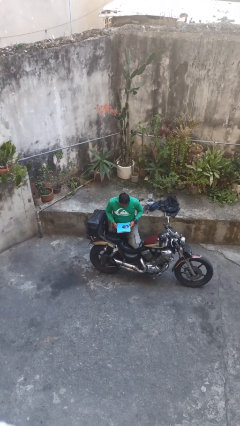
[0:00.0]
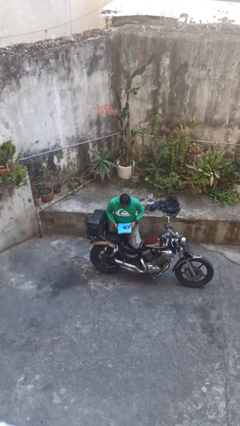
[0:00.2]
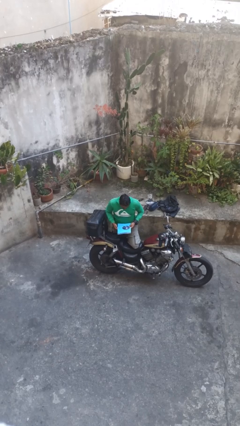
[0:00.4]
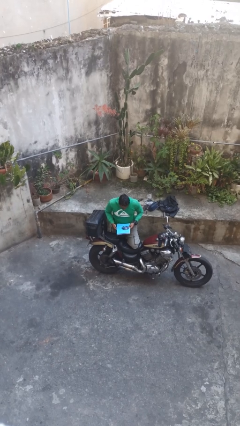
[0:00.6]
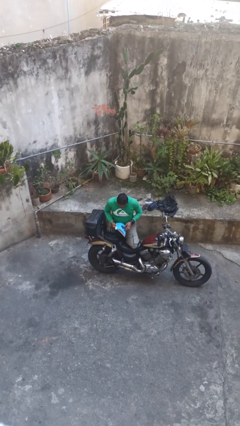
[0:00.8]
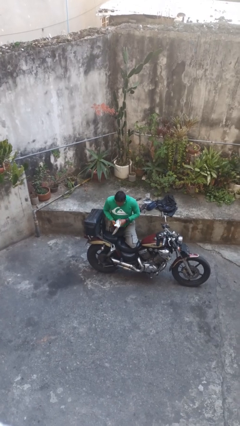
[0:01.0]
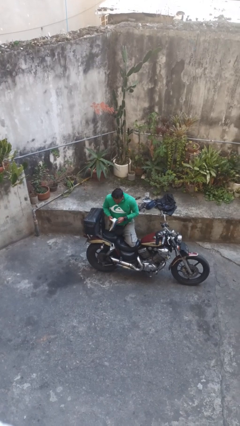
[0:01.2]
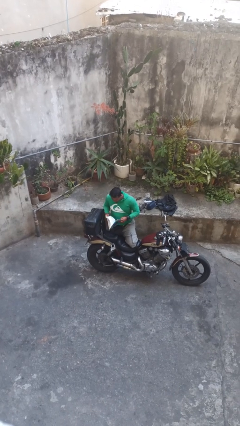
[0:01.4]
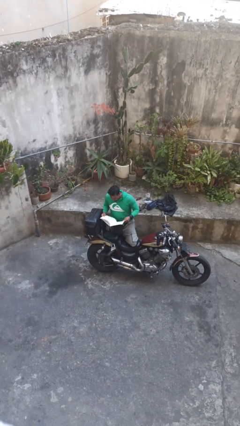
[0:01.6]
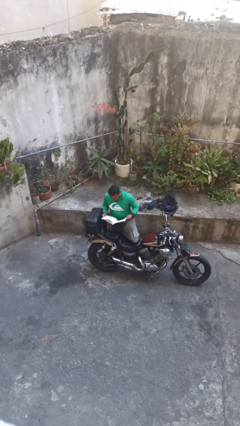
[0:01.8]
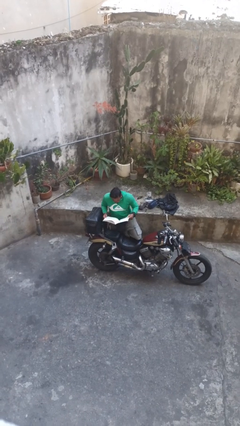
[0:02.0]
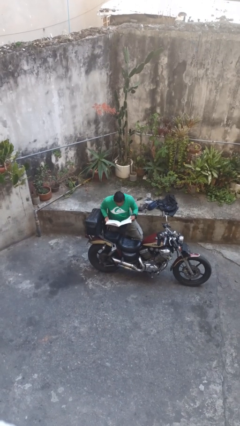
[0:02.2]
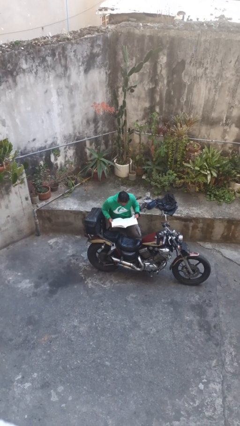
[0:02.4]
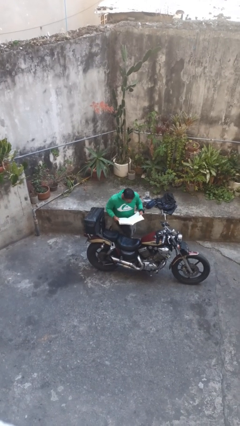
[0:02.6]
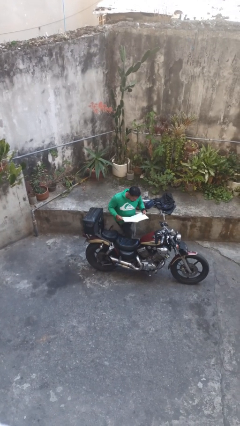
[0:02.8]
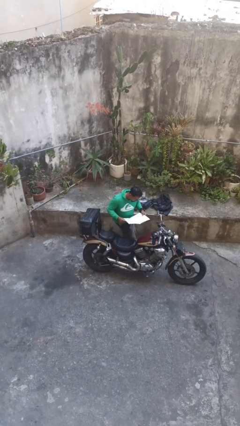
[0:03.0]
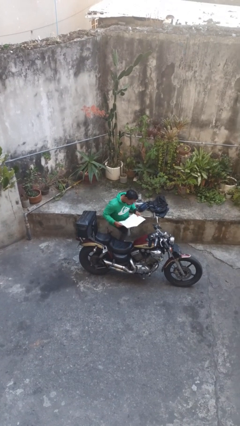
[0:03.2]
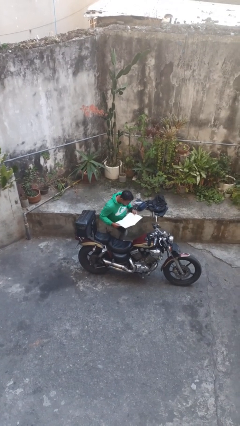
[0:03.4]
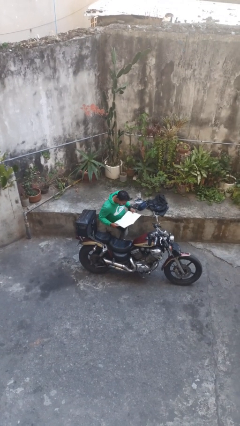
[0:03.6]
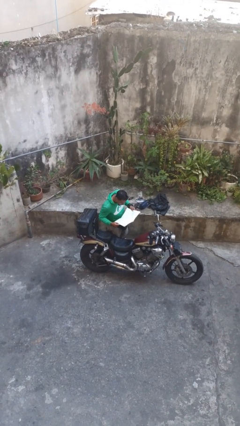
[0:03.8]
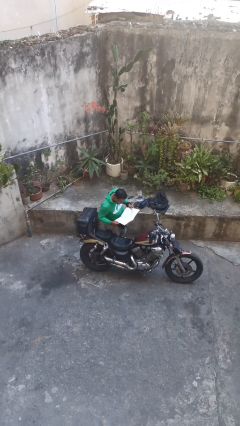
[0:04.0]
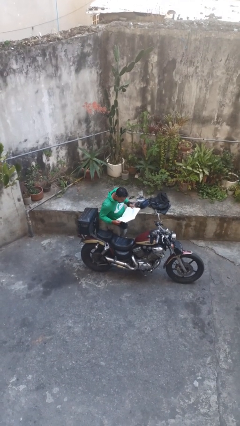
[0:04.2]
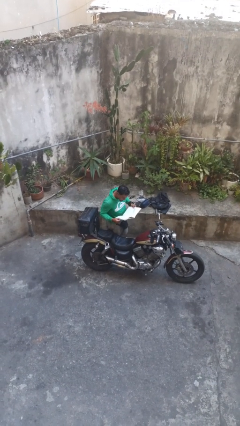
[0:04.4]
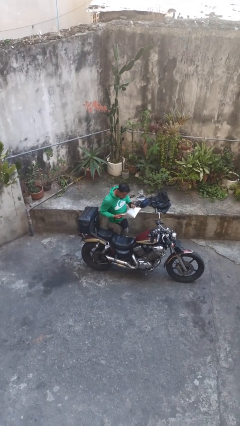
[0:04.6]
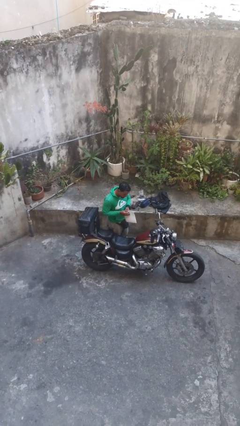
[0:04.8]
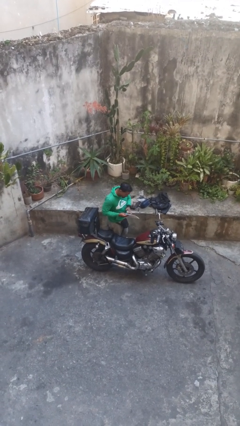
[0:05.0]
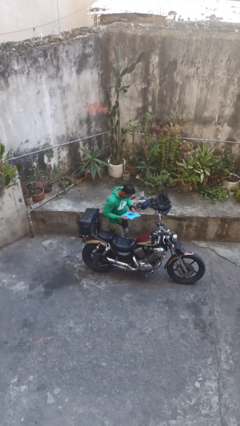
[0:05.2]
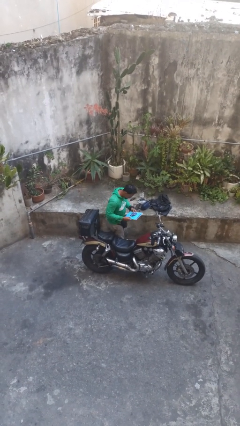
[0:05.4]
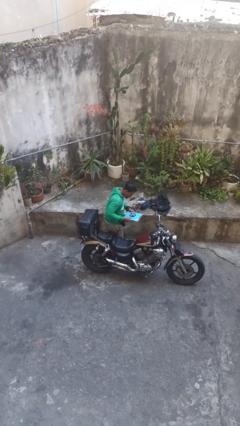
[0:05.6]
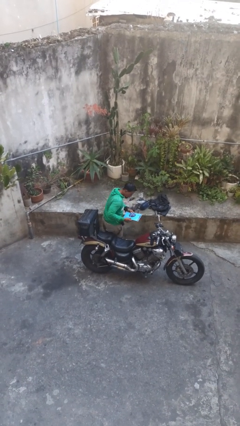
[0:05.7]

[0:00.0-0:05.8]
person reads document

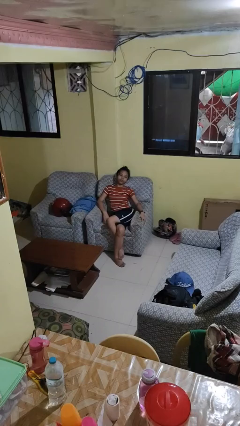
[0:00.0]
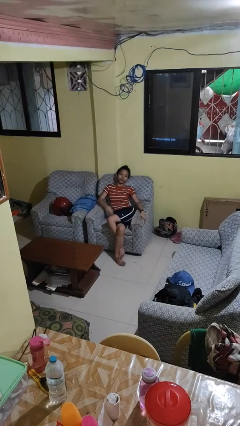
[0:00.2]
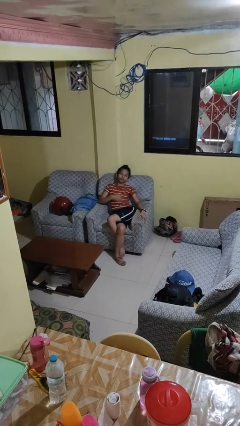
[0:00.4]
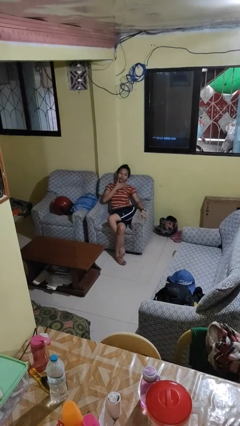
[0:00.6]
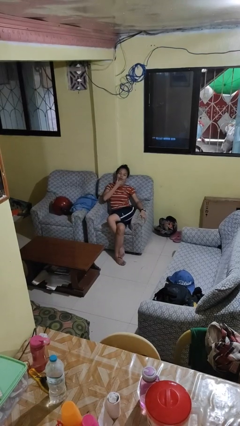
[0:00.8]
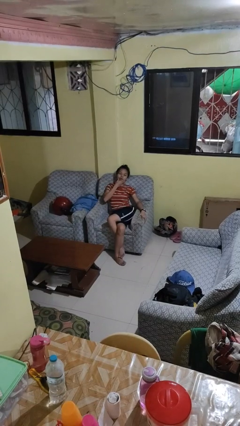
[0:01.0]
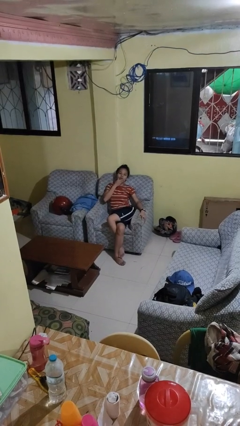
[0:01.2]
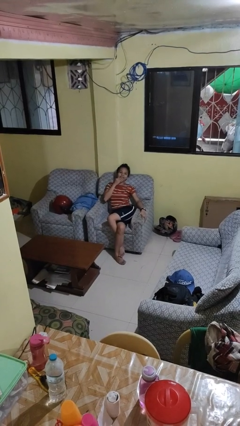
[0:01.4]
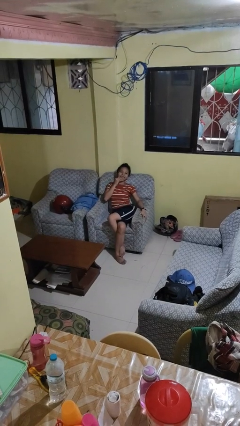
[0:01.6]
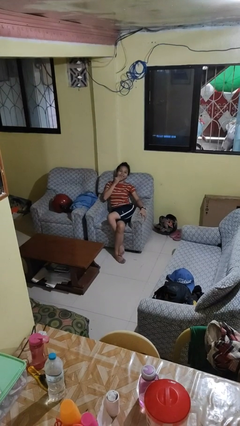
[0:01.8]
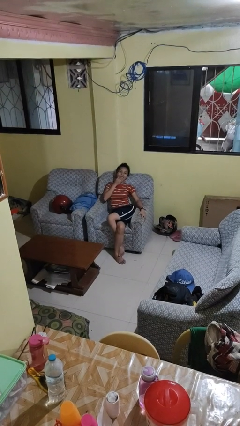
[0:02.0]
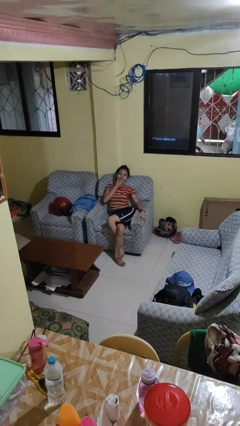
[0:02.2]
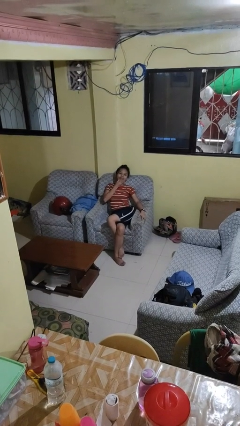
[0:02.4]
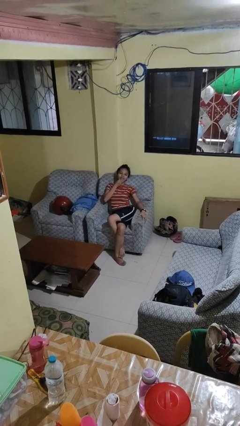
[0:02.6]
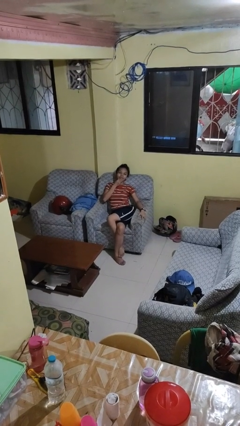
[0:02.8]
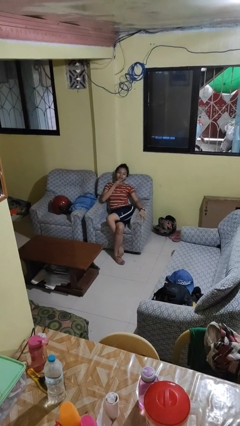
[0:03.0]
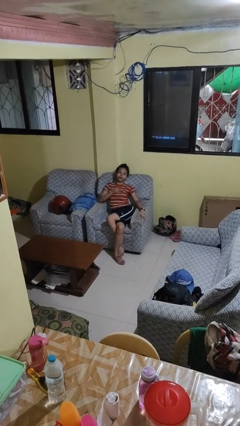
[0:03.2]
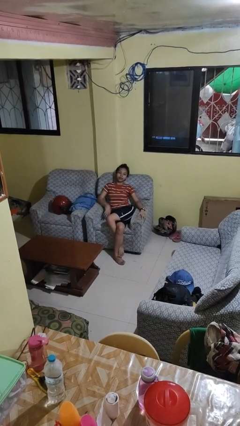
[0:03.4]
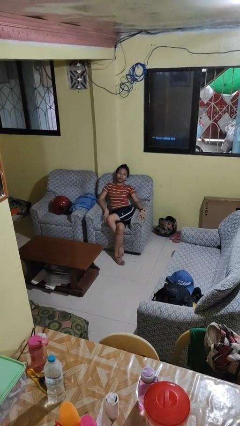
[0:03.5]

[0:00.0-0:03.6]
person strokes chin

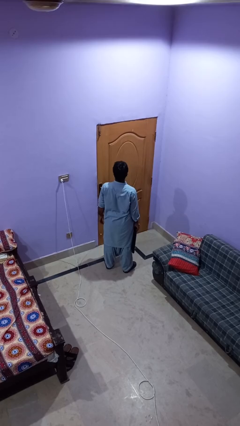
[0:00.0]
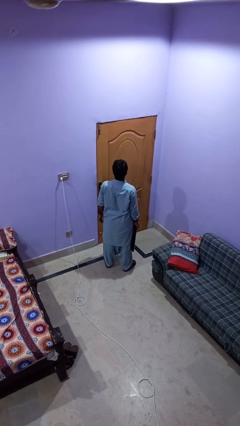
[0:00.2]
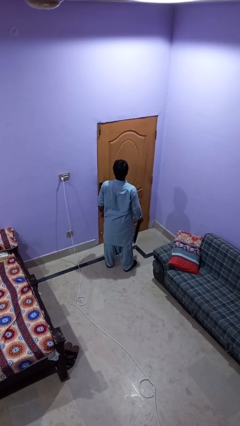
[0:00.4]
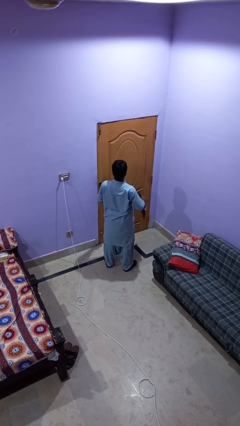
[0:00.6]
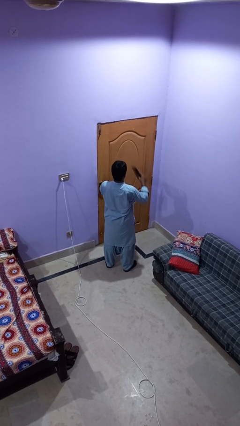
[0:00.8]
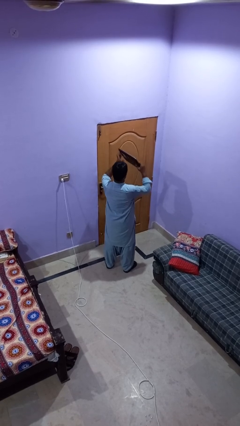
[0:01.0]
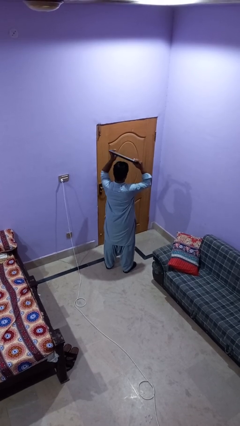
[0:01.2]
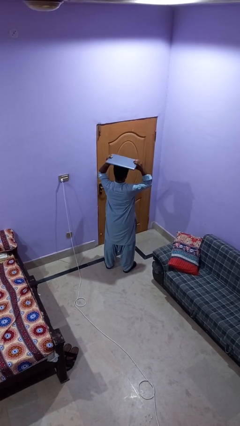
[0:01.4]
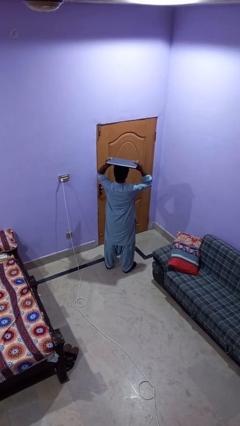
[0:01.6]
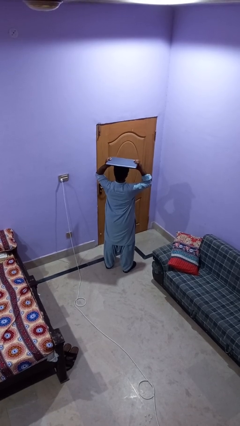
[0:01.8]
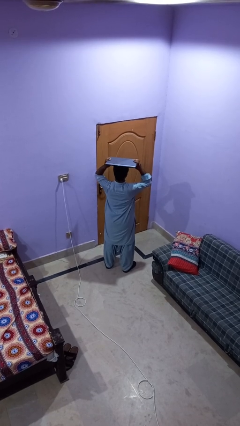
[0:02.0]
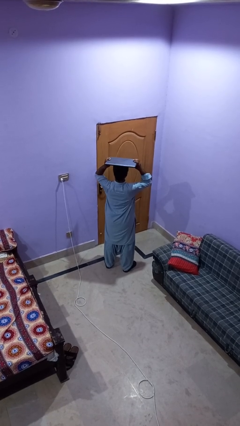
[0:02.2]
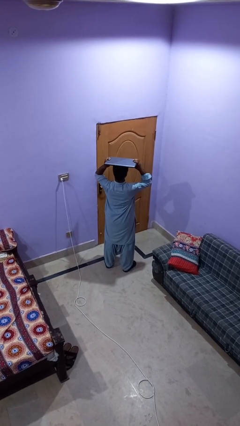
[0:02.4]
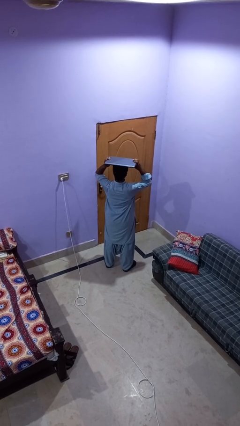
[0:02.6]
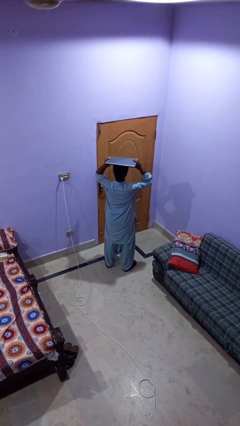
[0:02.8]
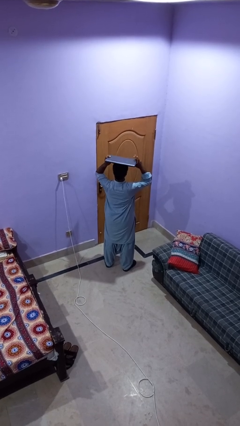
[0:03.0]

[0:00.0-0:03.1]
person holds object above head

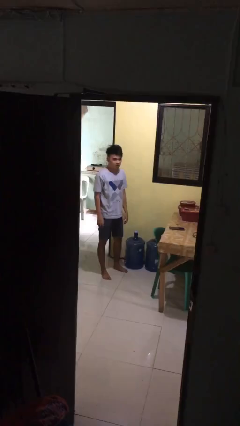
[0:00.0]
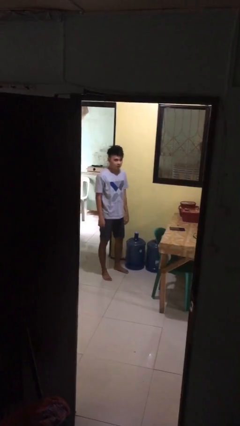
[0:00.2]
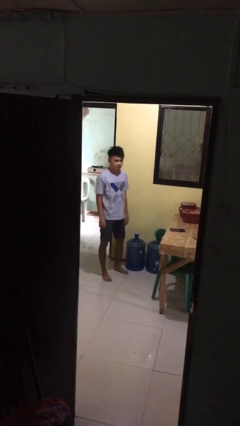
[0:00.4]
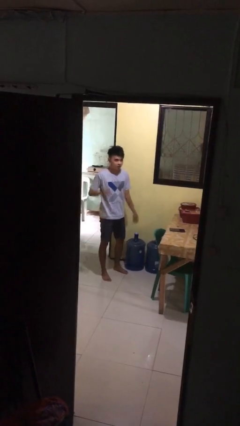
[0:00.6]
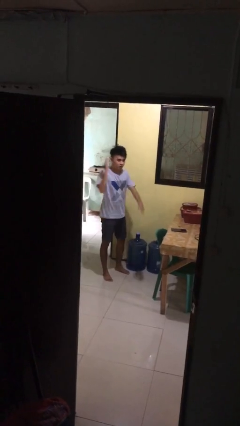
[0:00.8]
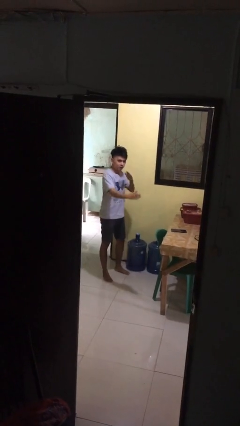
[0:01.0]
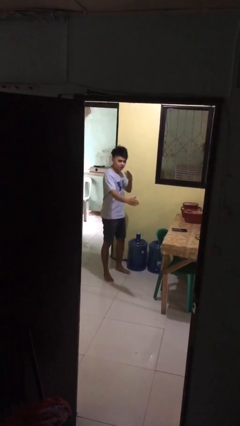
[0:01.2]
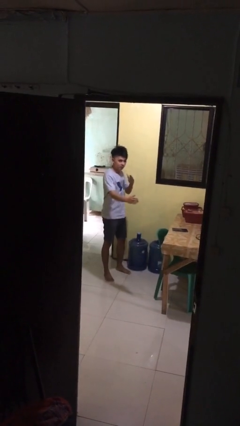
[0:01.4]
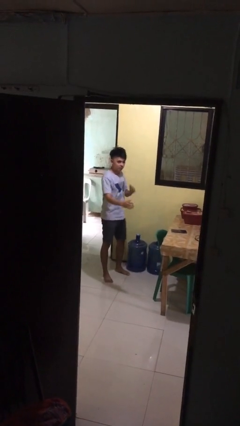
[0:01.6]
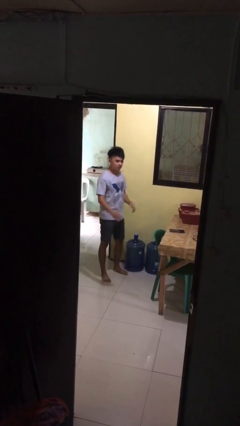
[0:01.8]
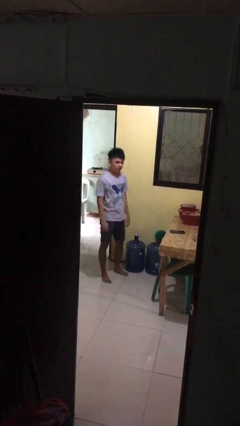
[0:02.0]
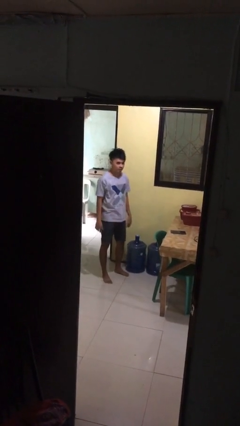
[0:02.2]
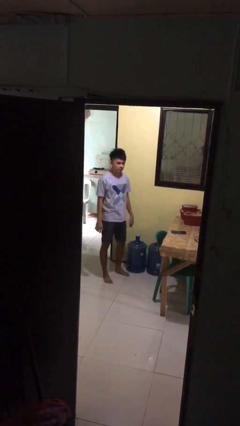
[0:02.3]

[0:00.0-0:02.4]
person karate chop

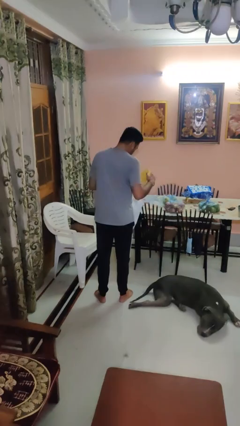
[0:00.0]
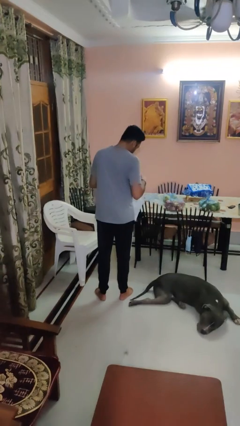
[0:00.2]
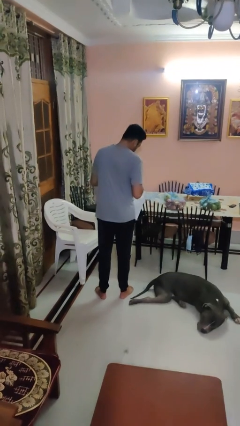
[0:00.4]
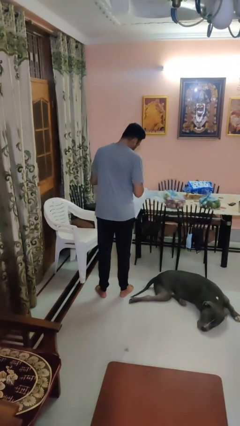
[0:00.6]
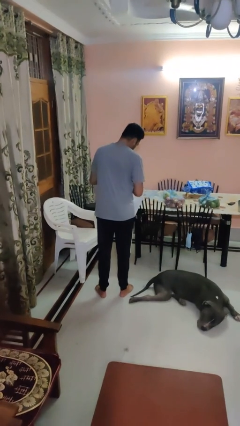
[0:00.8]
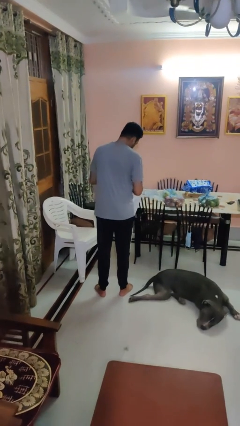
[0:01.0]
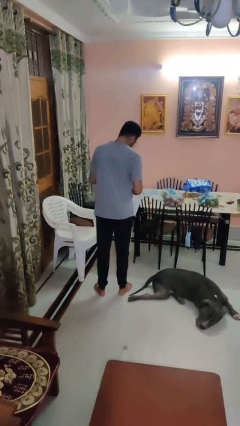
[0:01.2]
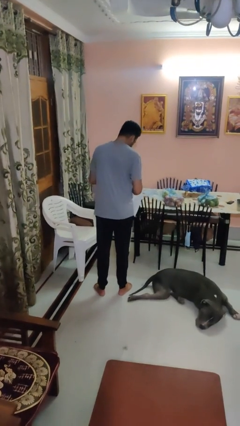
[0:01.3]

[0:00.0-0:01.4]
person puts object into bag

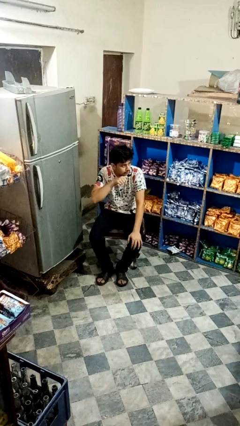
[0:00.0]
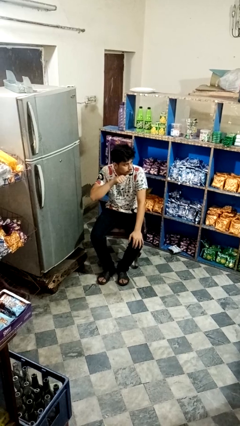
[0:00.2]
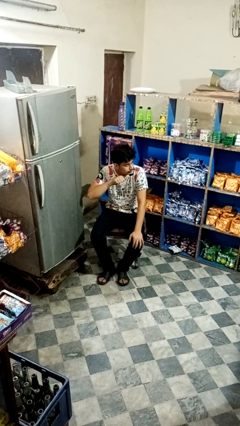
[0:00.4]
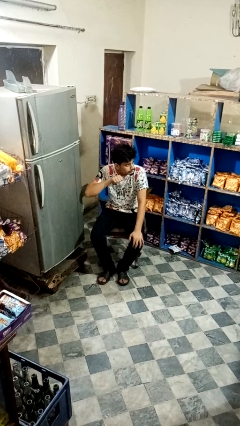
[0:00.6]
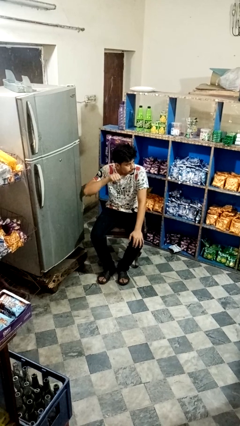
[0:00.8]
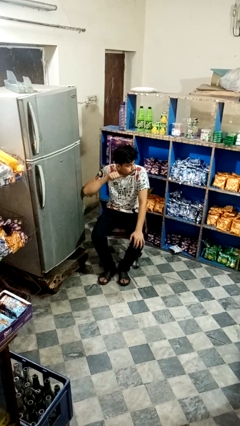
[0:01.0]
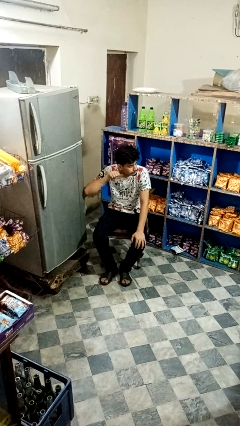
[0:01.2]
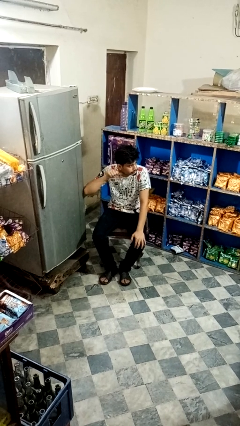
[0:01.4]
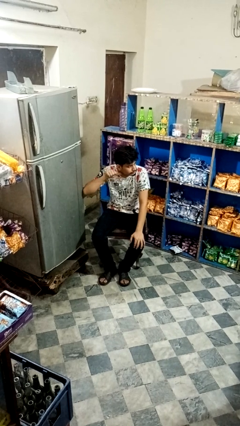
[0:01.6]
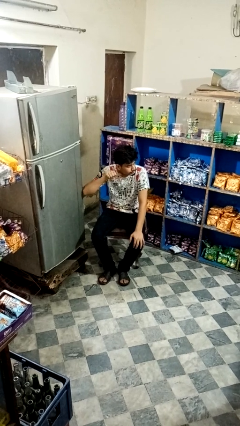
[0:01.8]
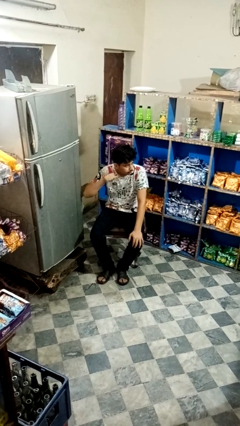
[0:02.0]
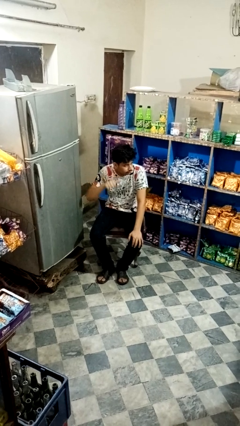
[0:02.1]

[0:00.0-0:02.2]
person gestures cut
